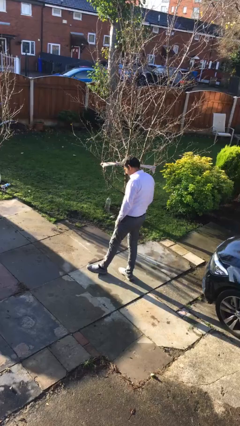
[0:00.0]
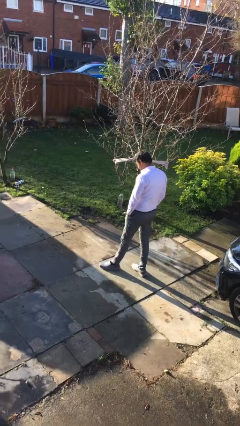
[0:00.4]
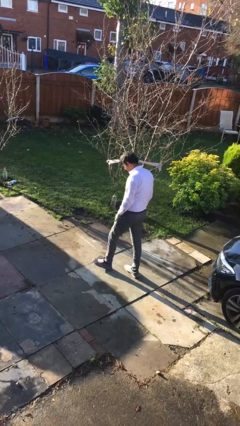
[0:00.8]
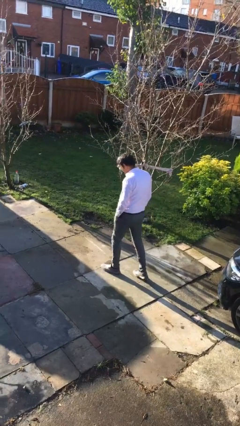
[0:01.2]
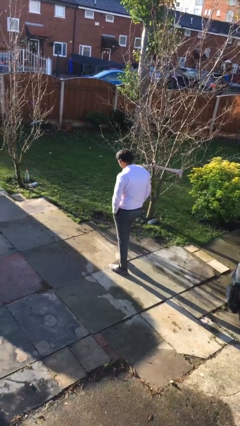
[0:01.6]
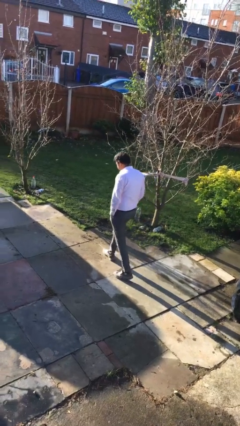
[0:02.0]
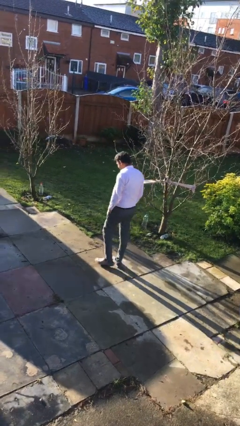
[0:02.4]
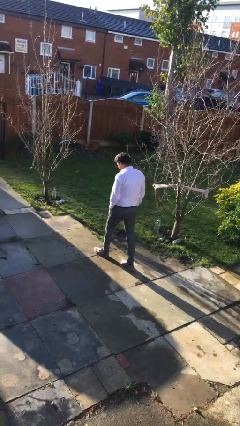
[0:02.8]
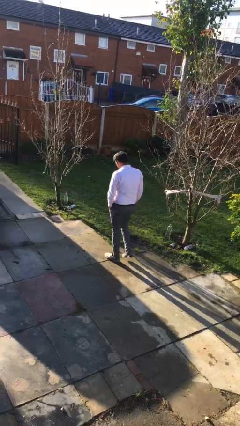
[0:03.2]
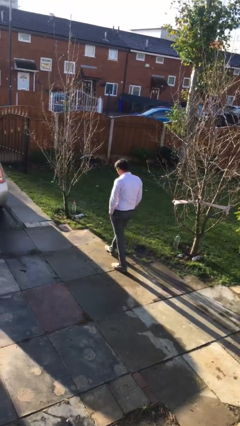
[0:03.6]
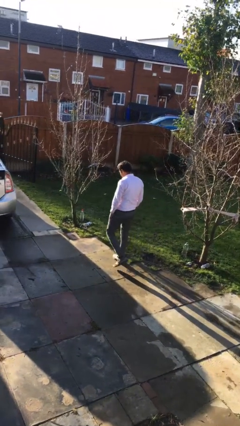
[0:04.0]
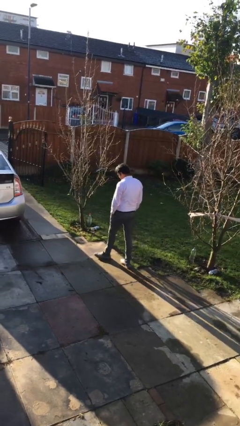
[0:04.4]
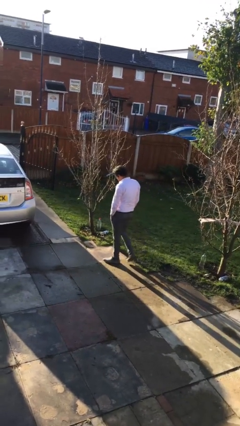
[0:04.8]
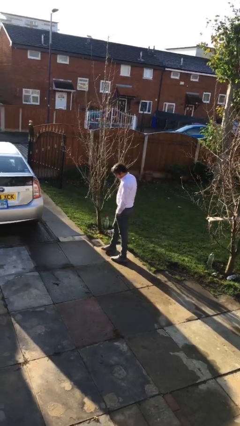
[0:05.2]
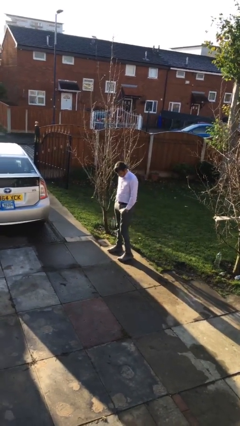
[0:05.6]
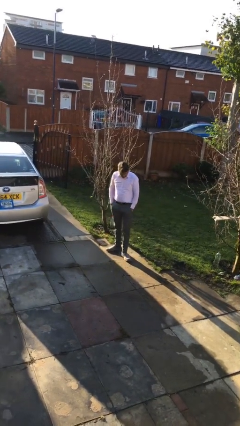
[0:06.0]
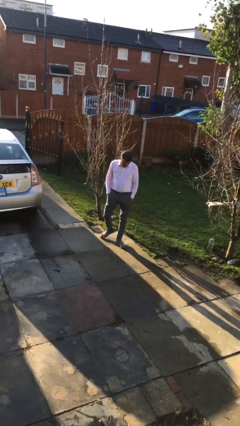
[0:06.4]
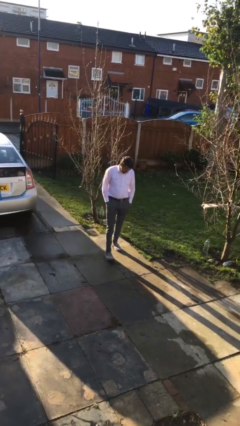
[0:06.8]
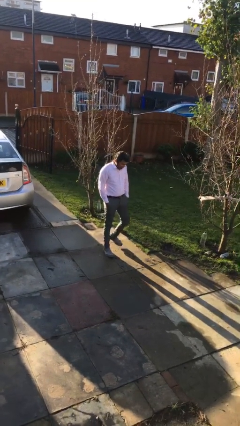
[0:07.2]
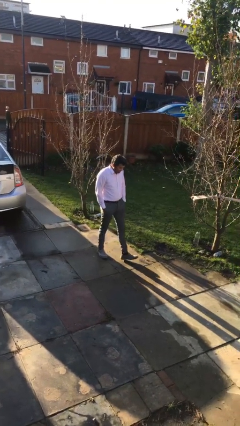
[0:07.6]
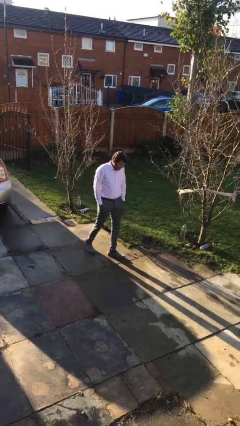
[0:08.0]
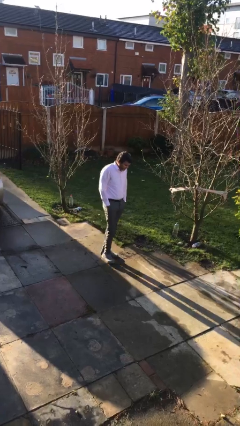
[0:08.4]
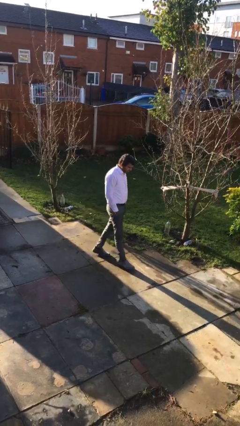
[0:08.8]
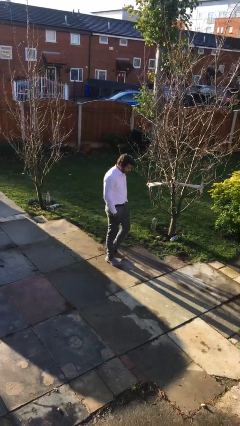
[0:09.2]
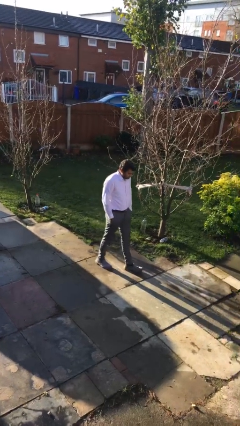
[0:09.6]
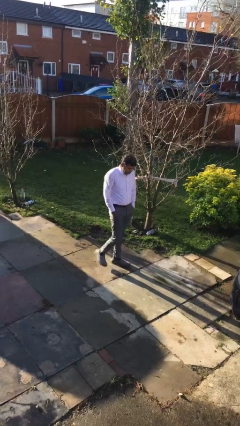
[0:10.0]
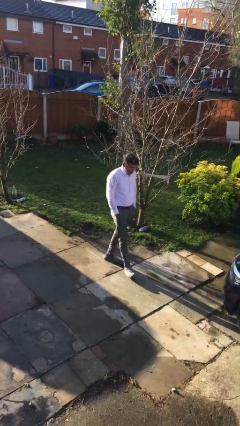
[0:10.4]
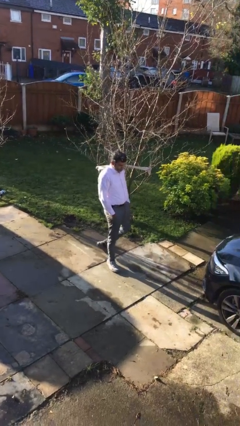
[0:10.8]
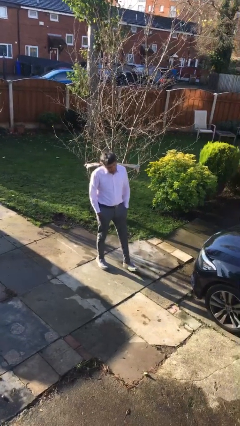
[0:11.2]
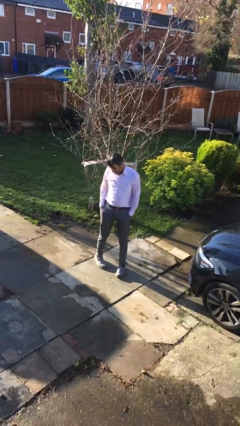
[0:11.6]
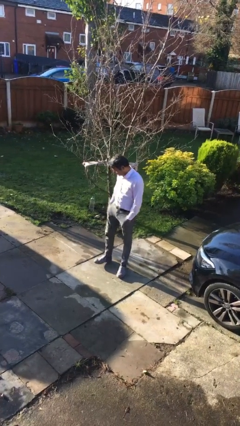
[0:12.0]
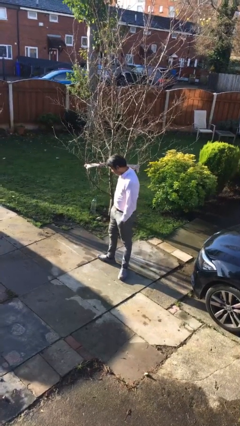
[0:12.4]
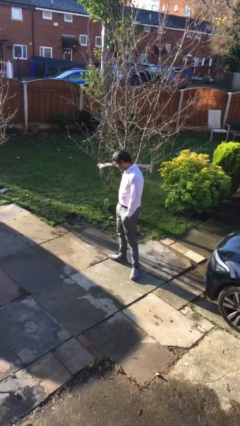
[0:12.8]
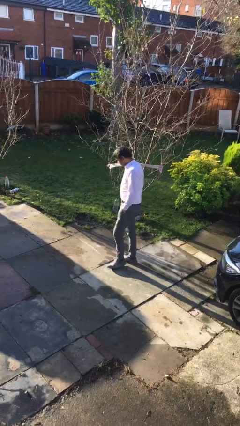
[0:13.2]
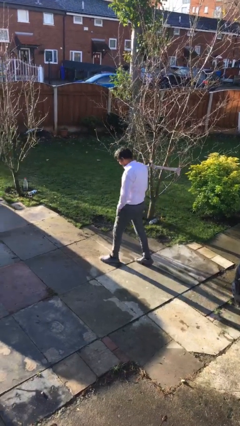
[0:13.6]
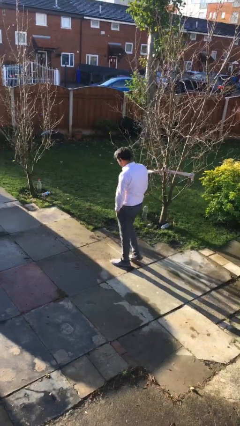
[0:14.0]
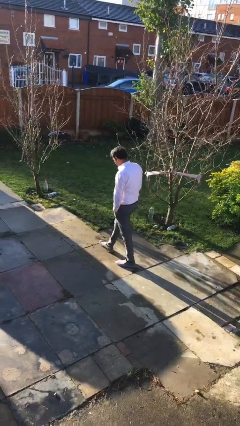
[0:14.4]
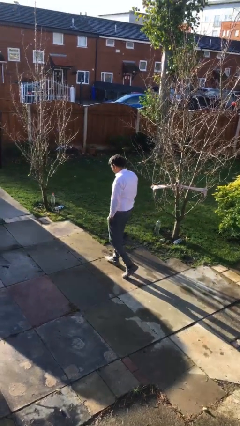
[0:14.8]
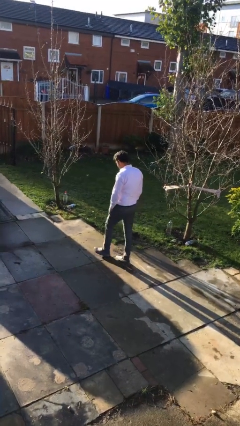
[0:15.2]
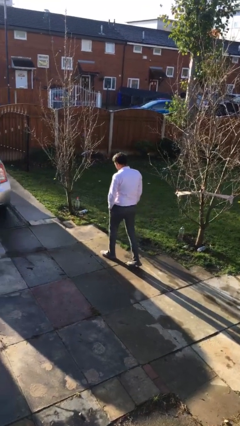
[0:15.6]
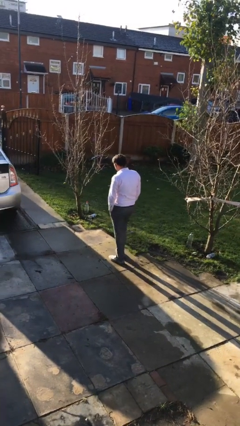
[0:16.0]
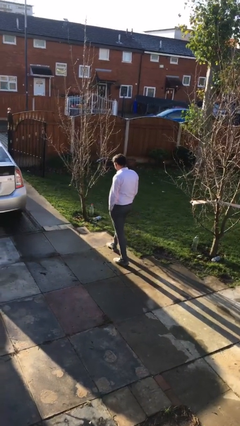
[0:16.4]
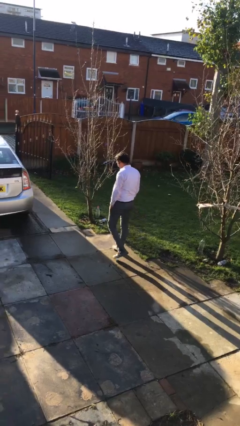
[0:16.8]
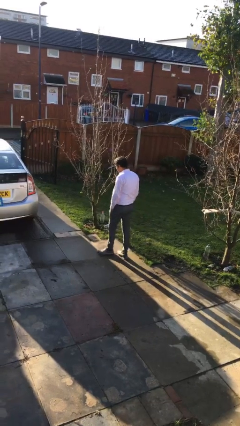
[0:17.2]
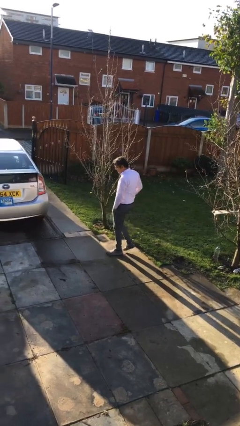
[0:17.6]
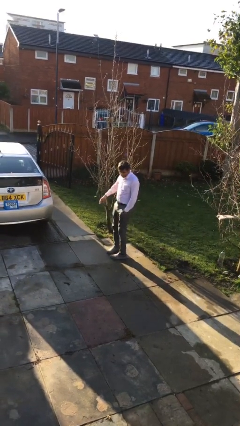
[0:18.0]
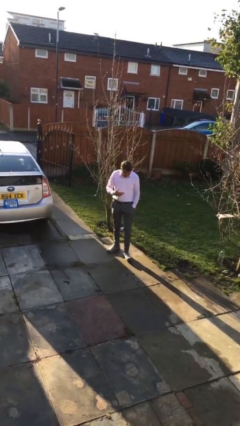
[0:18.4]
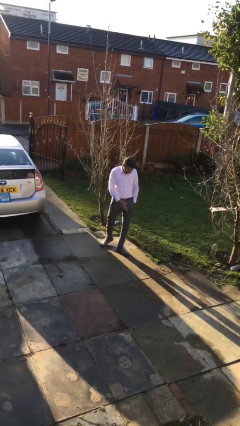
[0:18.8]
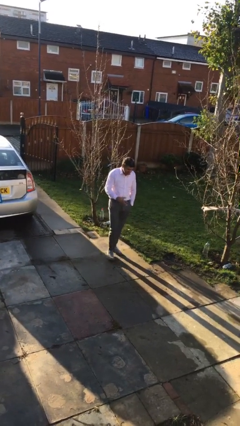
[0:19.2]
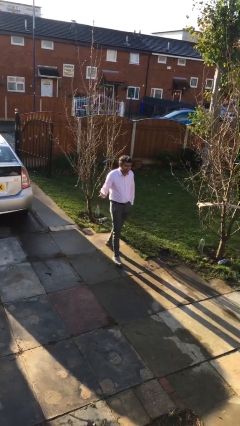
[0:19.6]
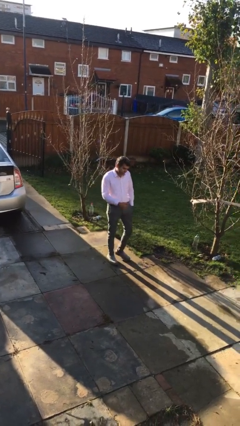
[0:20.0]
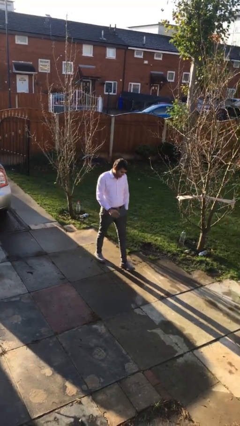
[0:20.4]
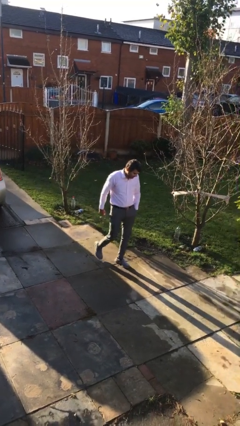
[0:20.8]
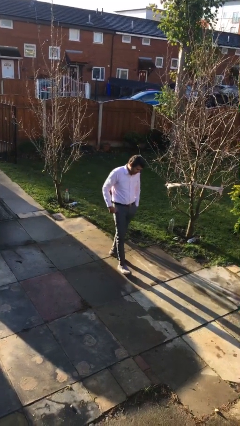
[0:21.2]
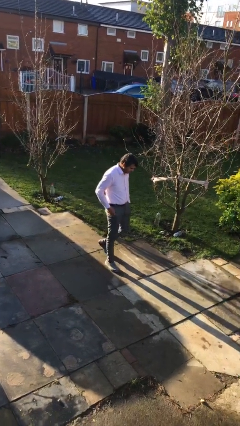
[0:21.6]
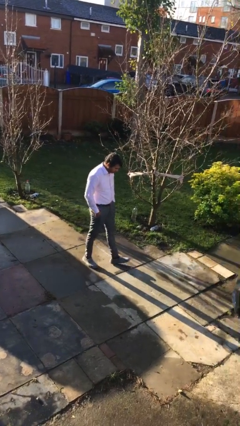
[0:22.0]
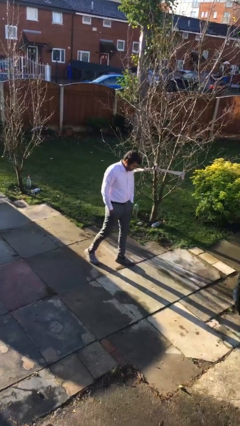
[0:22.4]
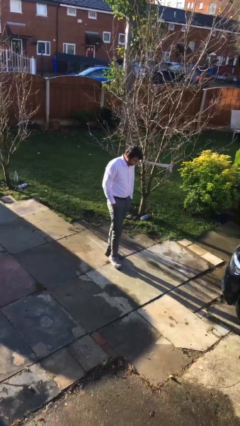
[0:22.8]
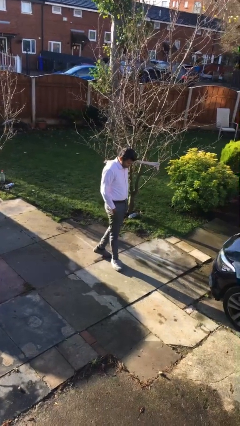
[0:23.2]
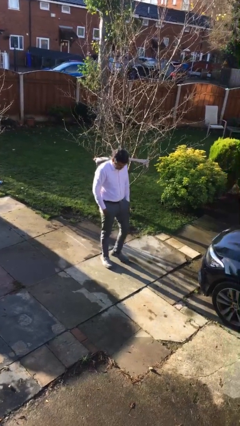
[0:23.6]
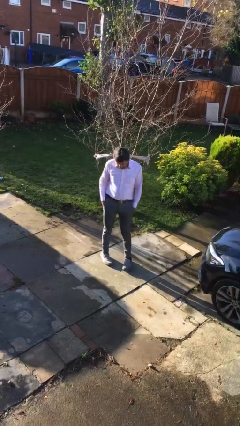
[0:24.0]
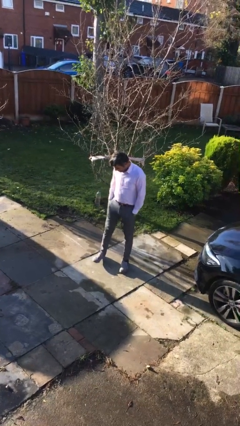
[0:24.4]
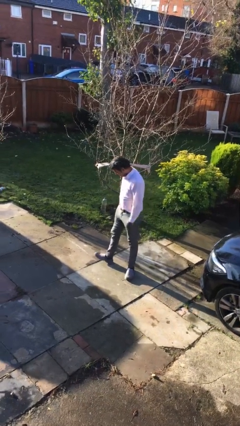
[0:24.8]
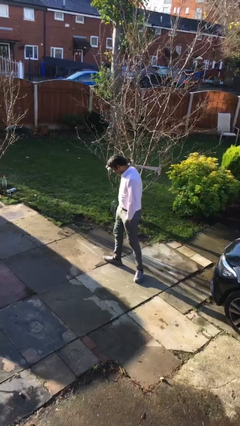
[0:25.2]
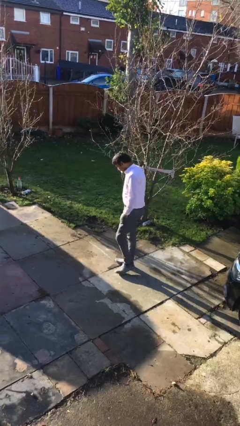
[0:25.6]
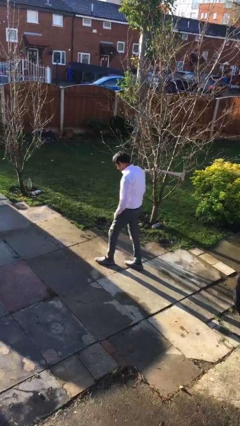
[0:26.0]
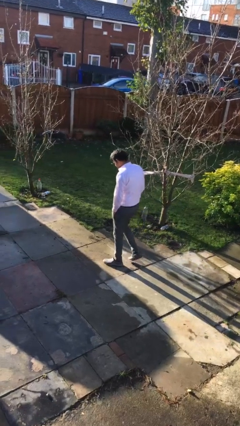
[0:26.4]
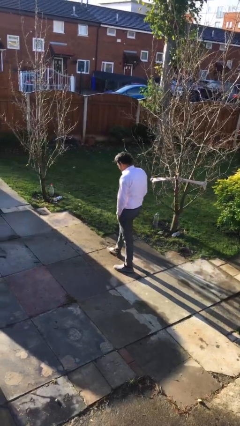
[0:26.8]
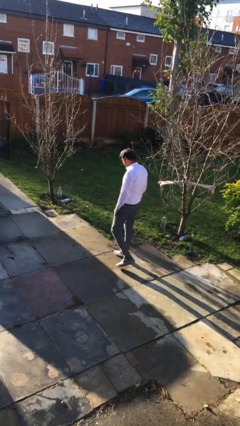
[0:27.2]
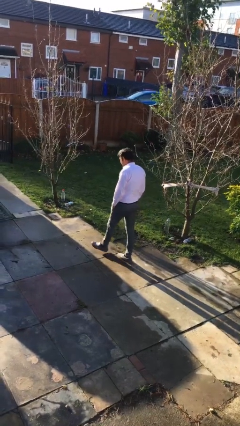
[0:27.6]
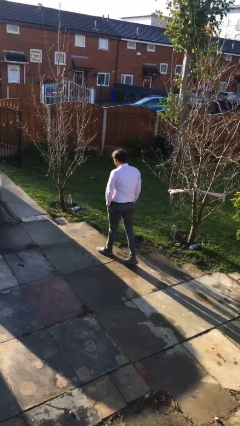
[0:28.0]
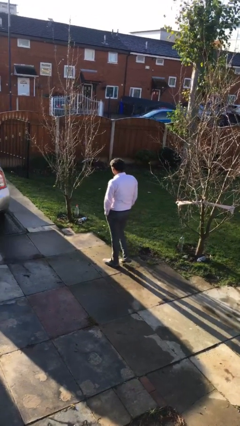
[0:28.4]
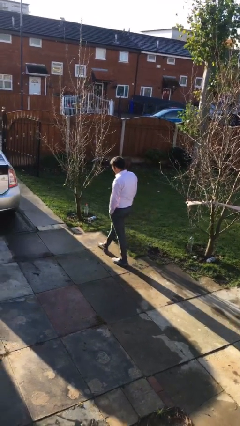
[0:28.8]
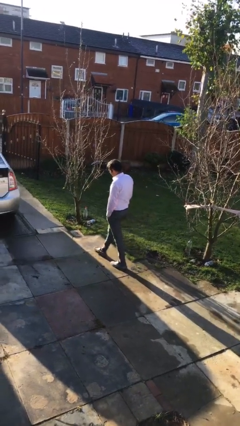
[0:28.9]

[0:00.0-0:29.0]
person walks

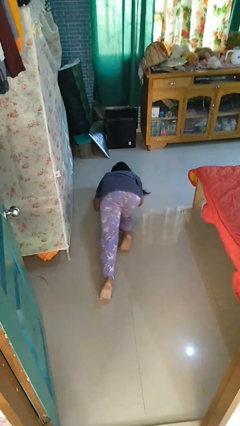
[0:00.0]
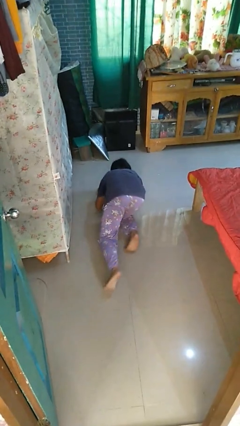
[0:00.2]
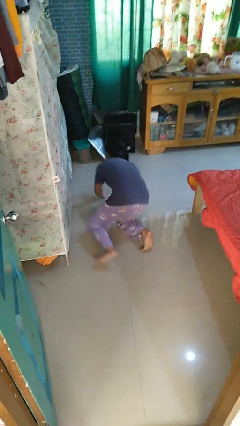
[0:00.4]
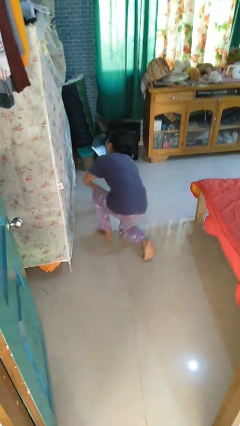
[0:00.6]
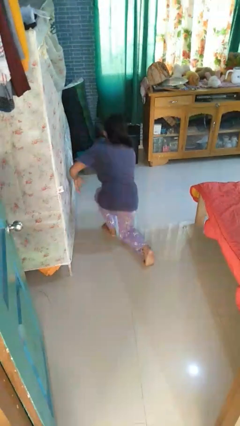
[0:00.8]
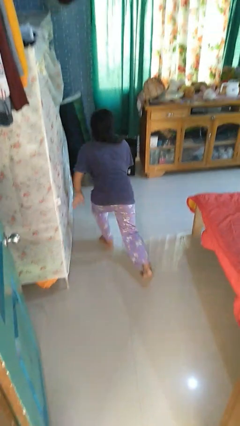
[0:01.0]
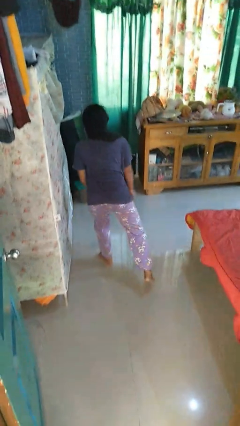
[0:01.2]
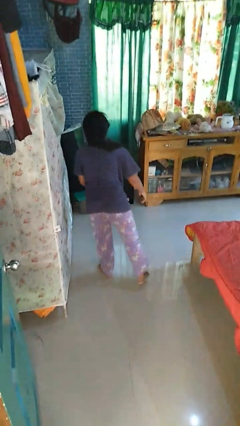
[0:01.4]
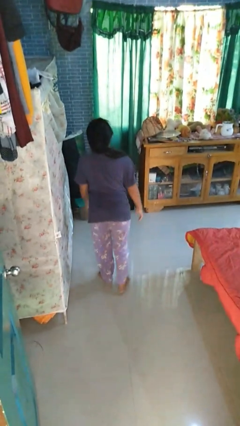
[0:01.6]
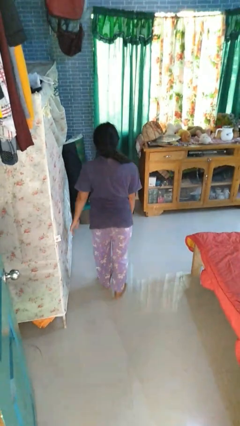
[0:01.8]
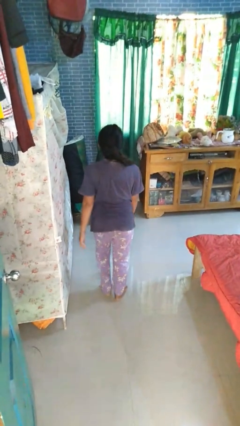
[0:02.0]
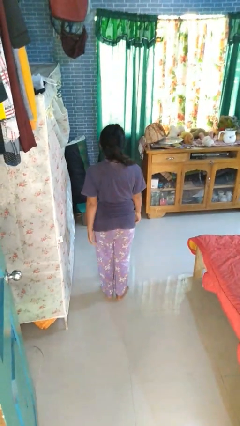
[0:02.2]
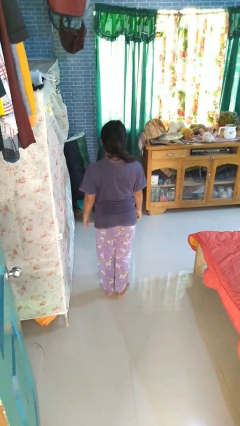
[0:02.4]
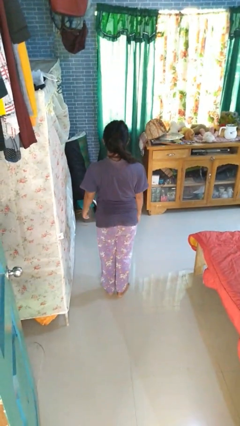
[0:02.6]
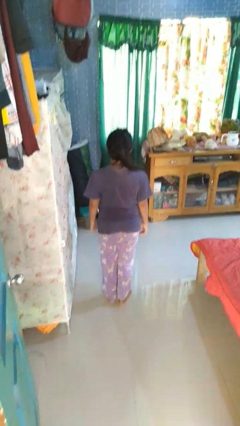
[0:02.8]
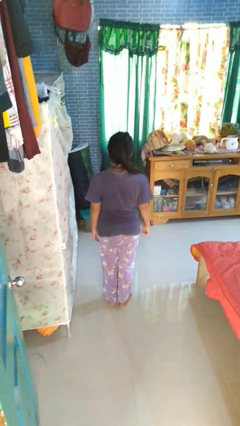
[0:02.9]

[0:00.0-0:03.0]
person stands up from floor

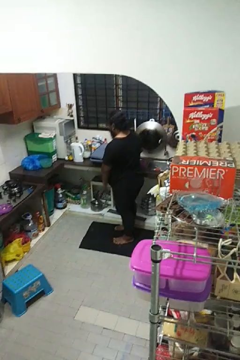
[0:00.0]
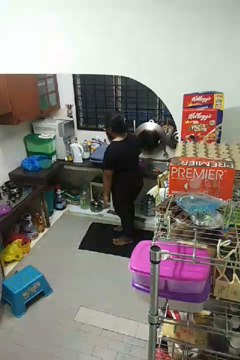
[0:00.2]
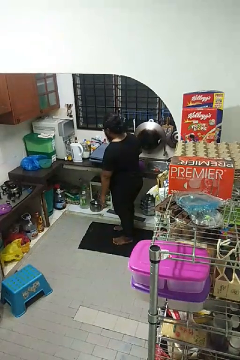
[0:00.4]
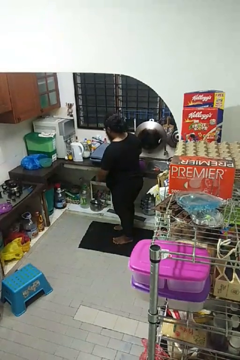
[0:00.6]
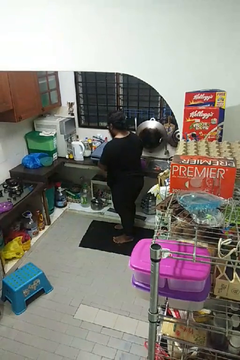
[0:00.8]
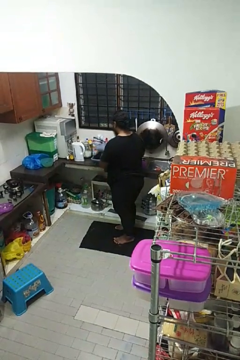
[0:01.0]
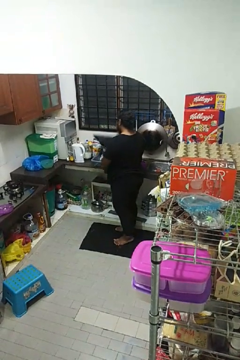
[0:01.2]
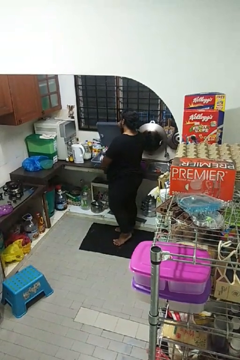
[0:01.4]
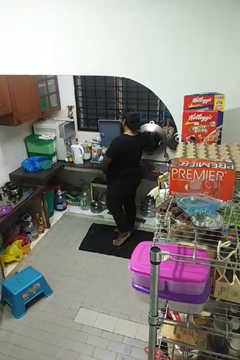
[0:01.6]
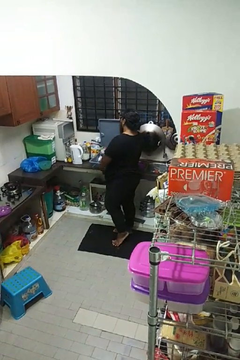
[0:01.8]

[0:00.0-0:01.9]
person opens dishwasher
